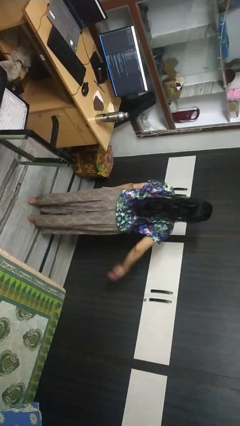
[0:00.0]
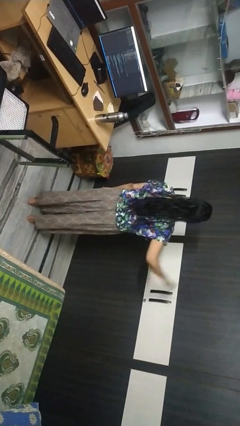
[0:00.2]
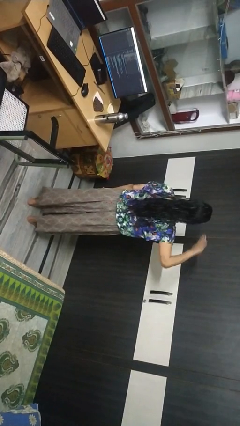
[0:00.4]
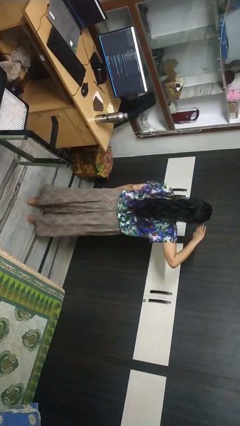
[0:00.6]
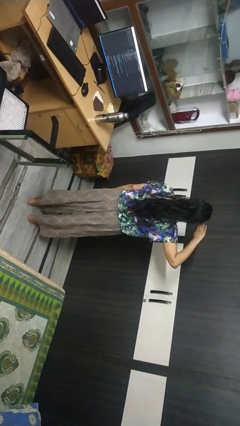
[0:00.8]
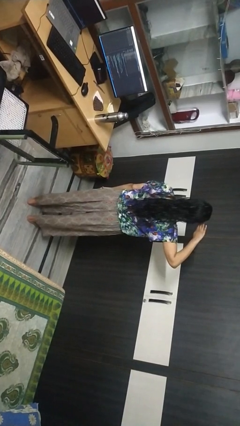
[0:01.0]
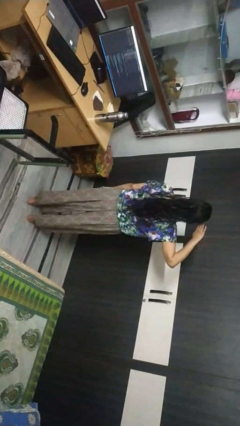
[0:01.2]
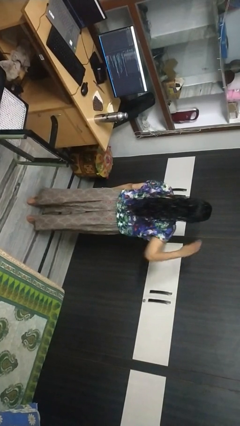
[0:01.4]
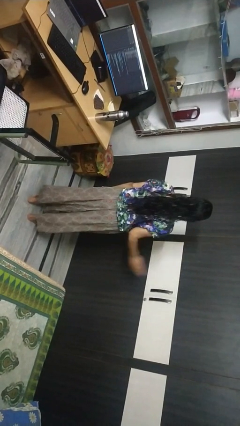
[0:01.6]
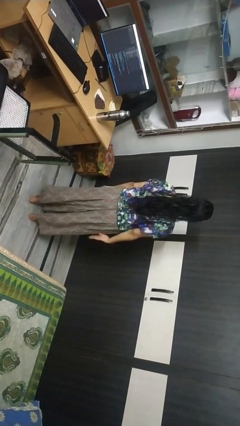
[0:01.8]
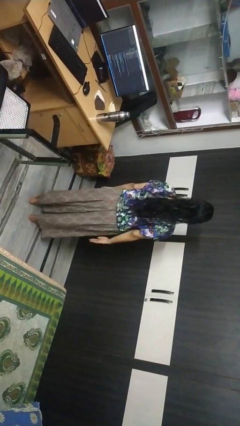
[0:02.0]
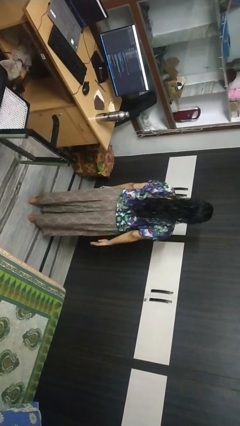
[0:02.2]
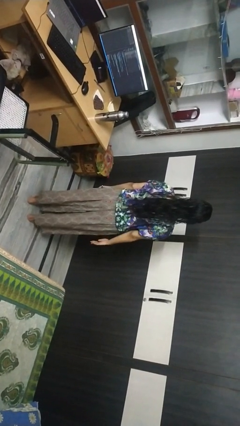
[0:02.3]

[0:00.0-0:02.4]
person salutes

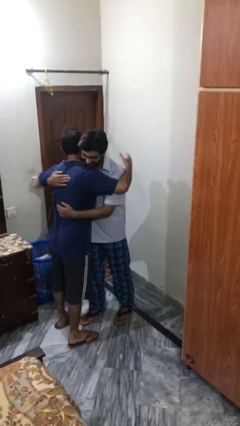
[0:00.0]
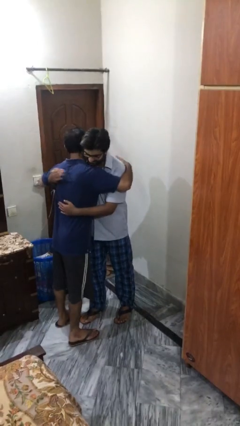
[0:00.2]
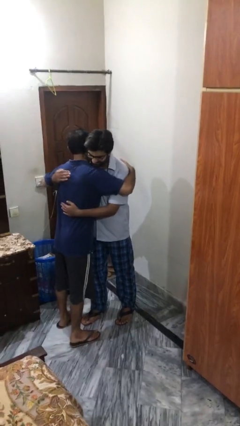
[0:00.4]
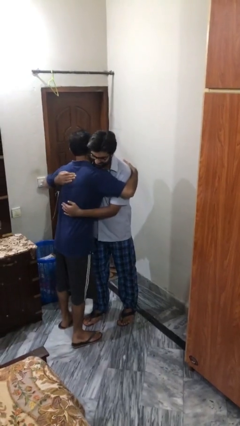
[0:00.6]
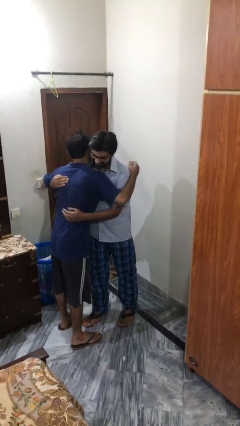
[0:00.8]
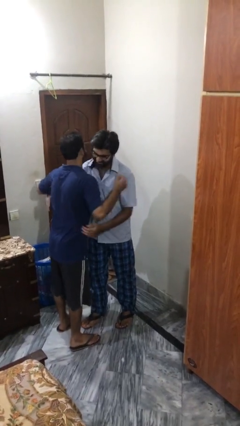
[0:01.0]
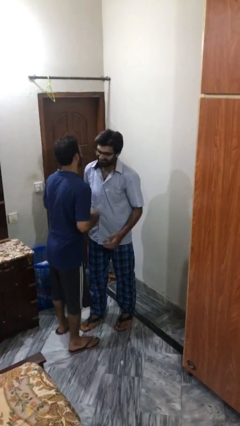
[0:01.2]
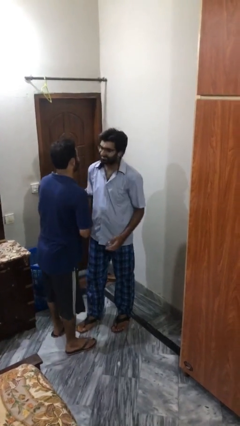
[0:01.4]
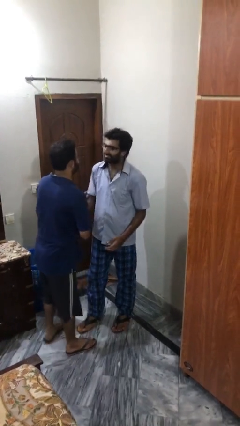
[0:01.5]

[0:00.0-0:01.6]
person embraces person

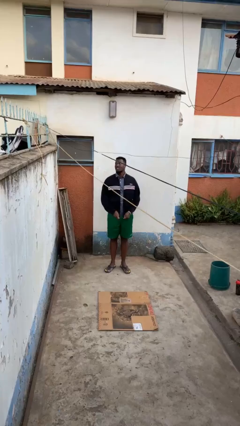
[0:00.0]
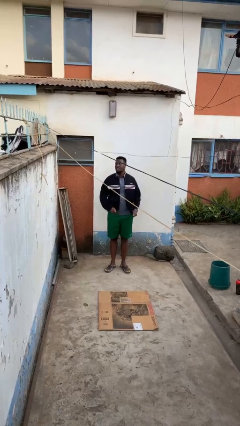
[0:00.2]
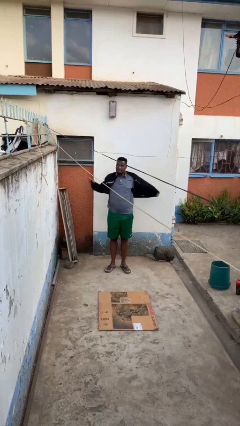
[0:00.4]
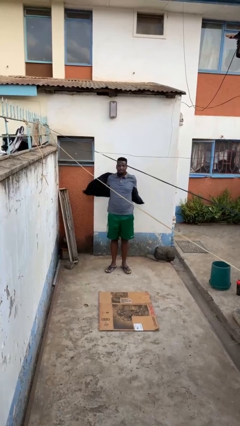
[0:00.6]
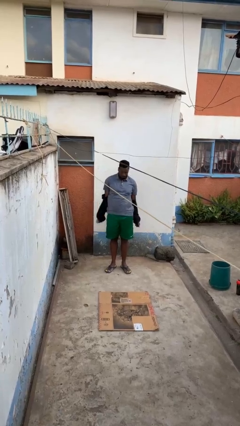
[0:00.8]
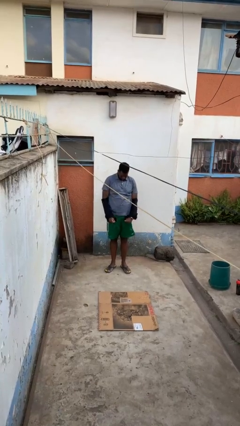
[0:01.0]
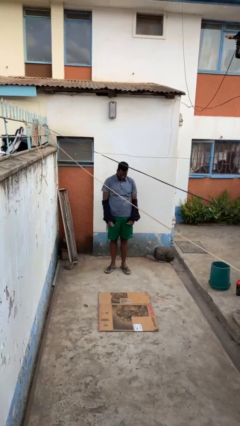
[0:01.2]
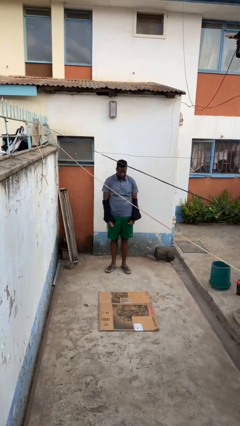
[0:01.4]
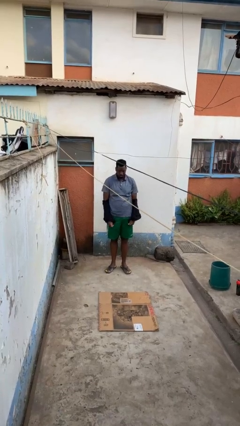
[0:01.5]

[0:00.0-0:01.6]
person takes off jacket

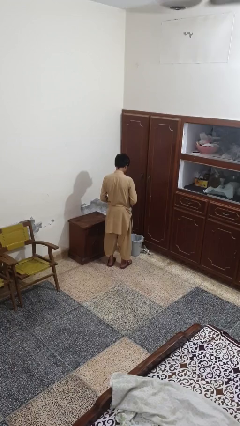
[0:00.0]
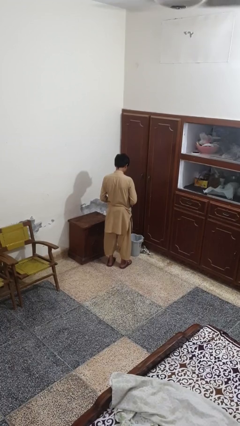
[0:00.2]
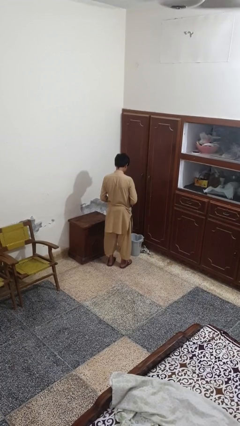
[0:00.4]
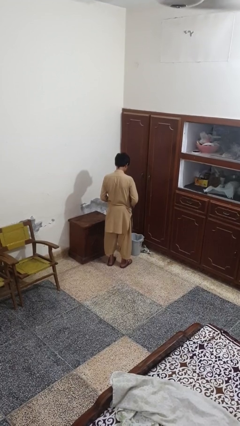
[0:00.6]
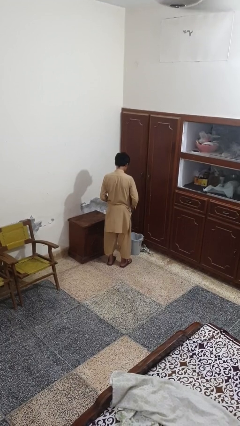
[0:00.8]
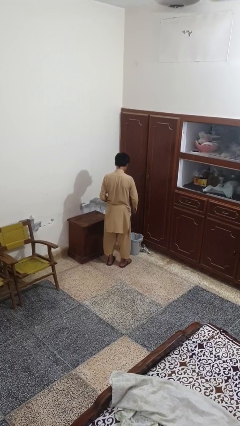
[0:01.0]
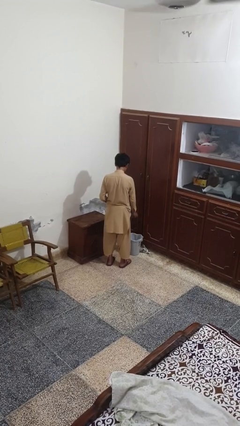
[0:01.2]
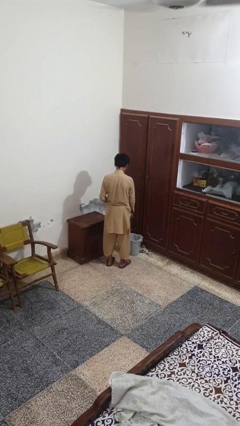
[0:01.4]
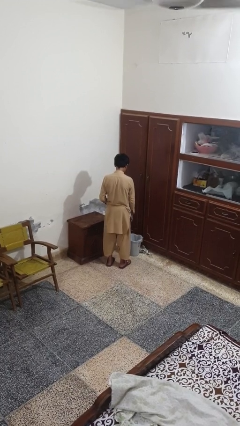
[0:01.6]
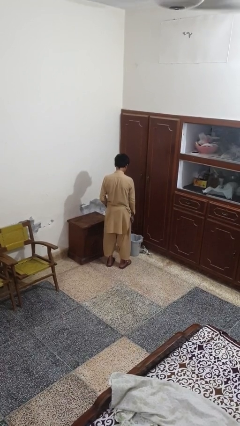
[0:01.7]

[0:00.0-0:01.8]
person discards trash

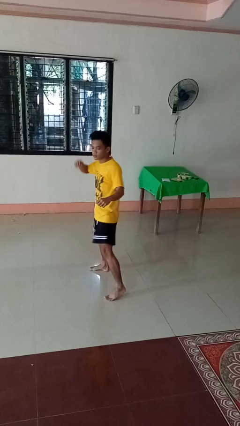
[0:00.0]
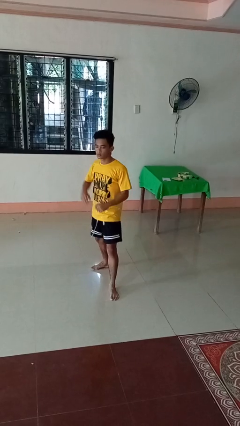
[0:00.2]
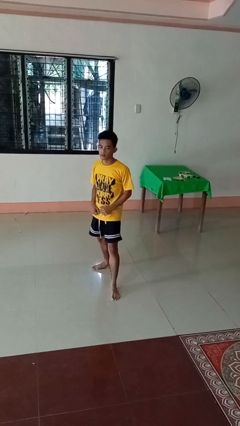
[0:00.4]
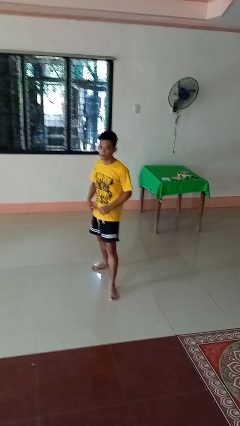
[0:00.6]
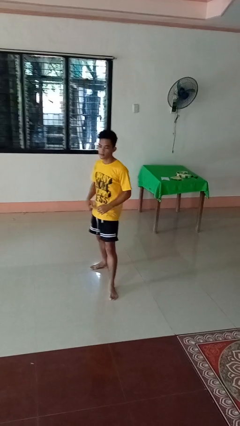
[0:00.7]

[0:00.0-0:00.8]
person karate chop

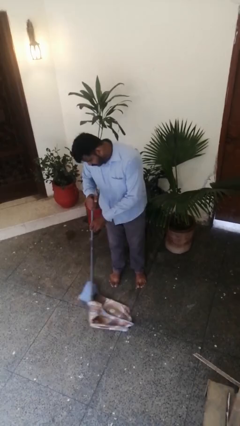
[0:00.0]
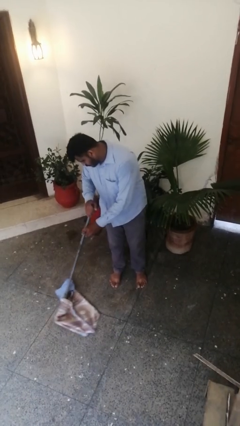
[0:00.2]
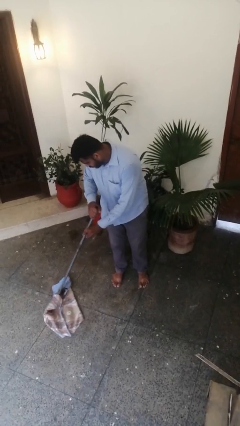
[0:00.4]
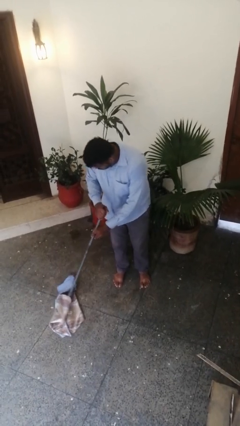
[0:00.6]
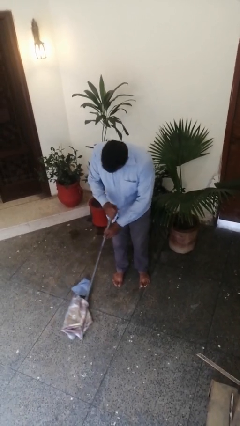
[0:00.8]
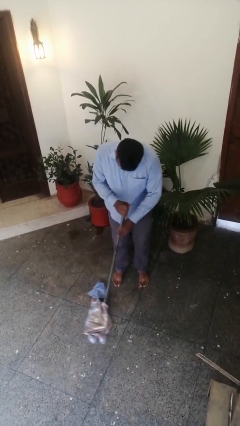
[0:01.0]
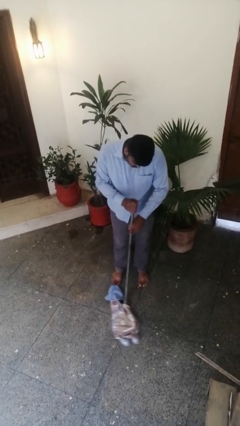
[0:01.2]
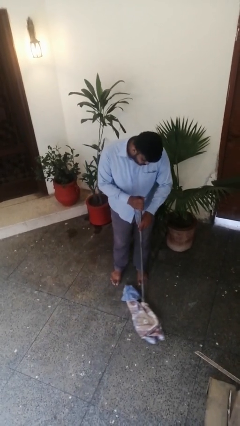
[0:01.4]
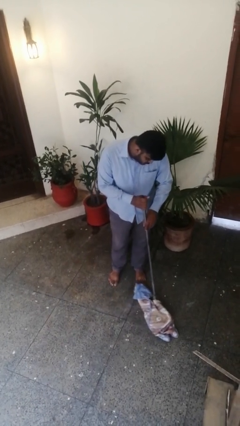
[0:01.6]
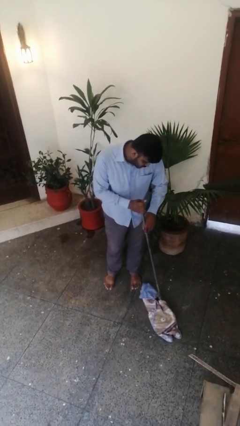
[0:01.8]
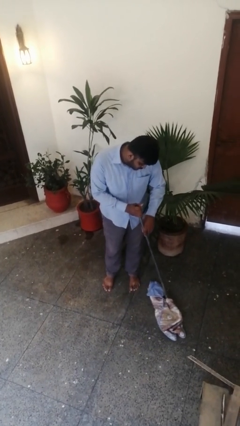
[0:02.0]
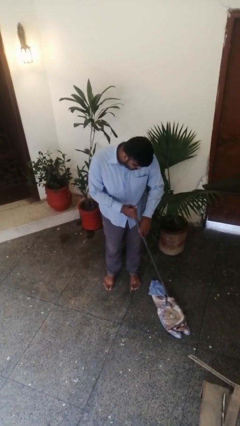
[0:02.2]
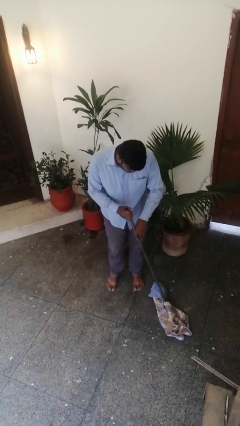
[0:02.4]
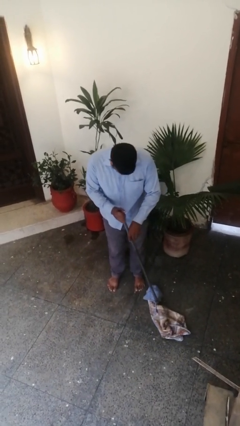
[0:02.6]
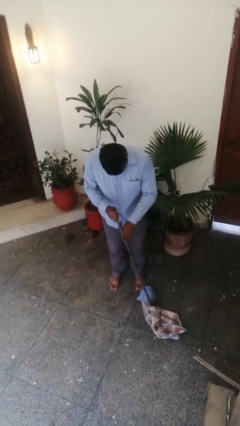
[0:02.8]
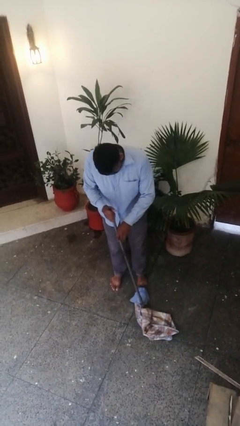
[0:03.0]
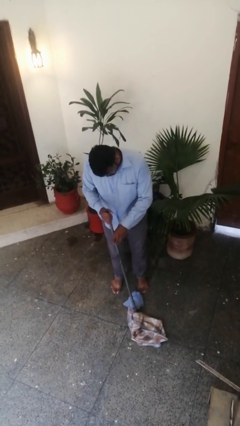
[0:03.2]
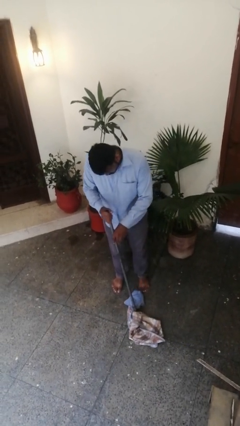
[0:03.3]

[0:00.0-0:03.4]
person sweeps floor

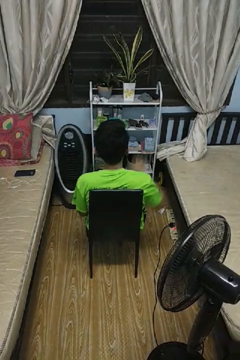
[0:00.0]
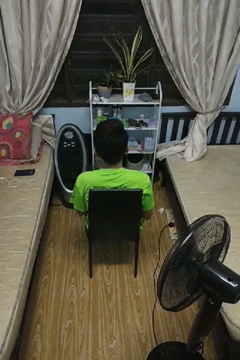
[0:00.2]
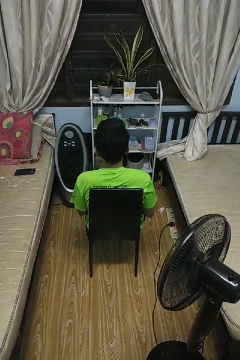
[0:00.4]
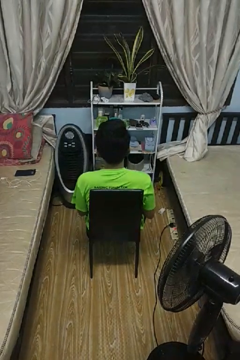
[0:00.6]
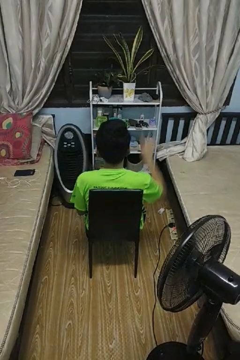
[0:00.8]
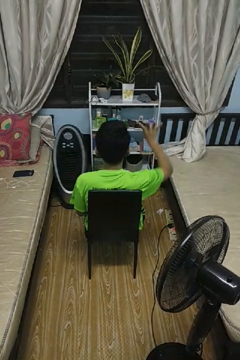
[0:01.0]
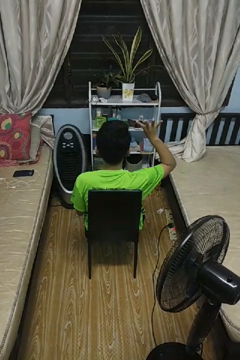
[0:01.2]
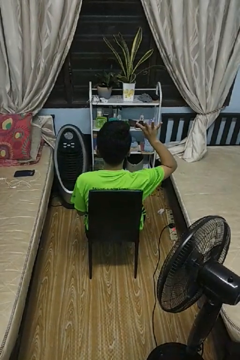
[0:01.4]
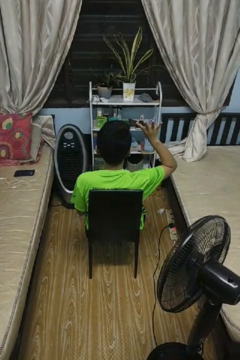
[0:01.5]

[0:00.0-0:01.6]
person gestures number four

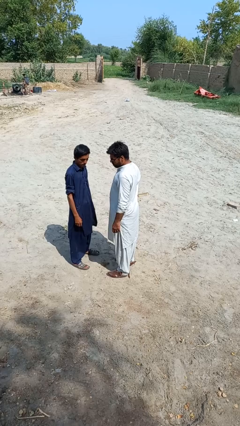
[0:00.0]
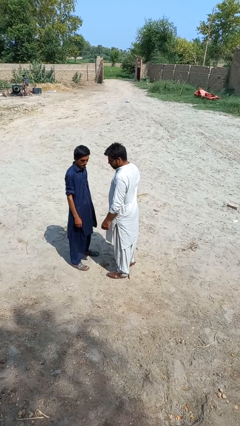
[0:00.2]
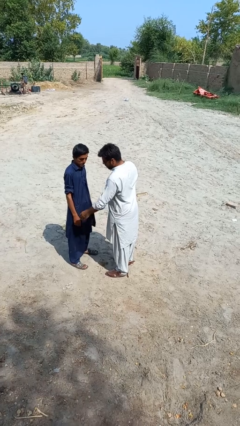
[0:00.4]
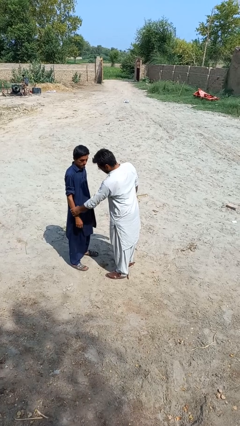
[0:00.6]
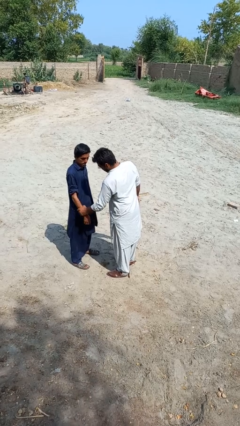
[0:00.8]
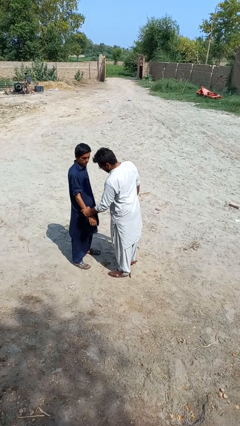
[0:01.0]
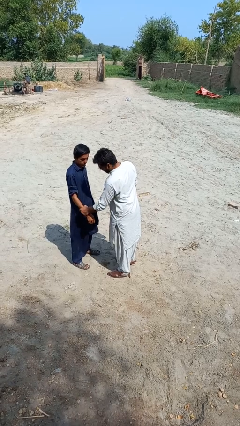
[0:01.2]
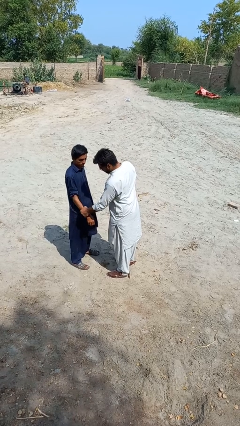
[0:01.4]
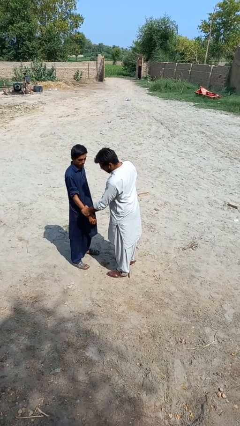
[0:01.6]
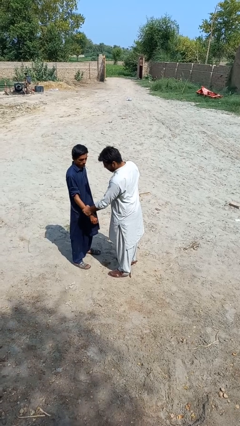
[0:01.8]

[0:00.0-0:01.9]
person grabs person by forearm

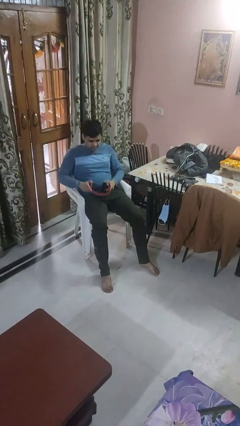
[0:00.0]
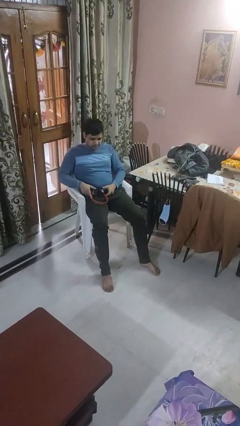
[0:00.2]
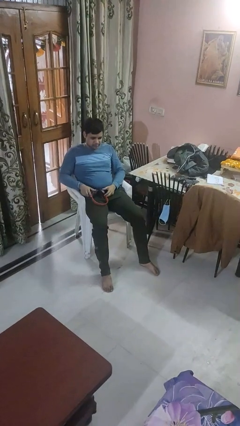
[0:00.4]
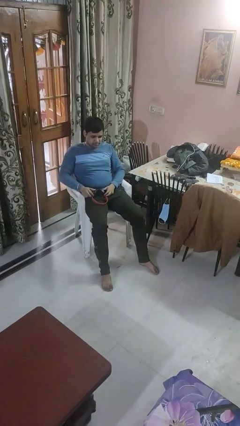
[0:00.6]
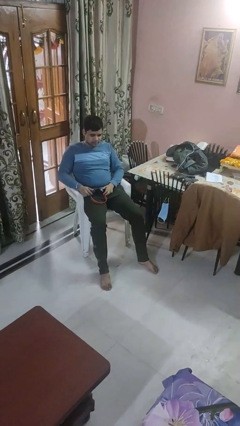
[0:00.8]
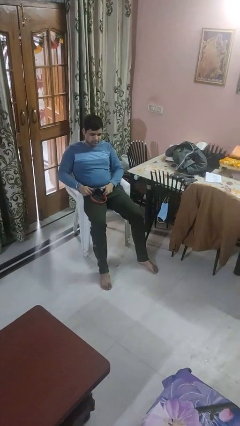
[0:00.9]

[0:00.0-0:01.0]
person takes off headphones

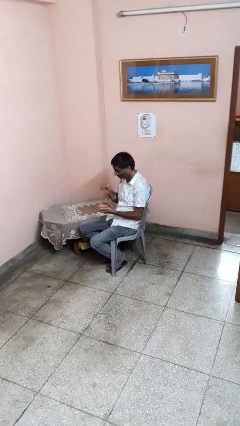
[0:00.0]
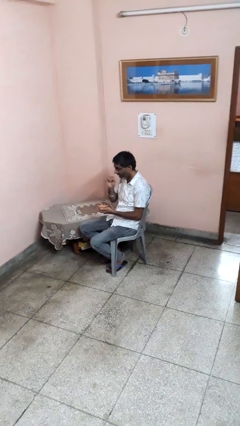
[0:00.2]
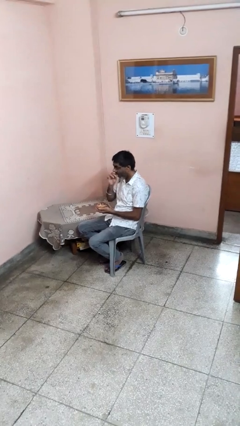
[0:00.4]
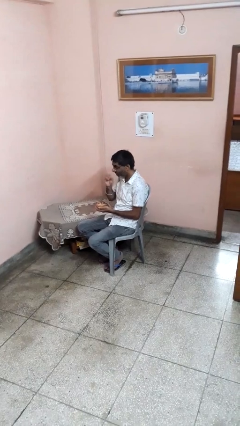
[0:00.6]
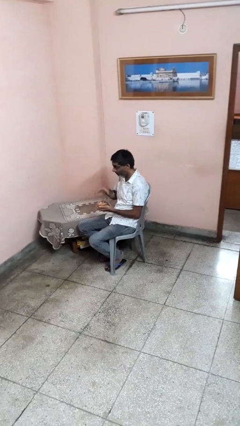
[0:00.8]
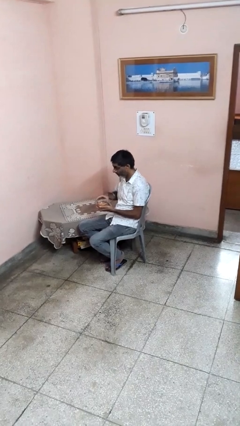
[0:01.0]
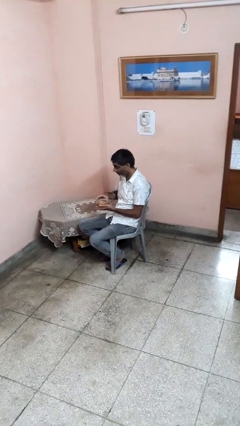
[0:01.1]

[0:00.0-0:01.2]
person eats with hands
